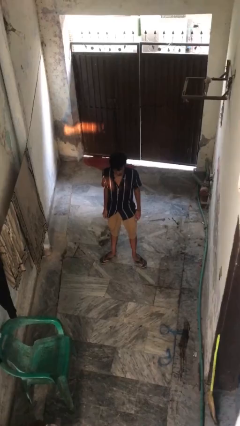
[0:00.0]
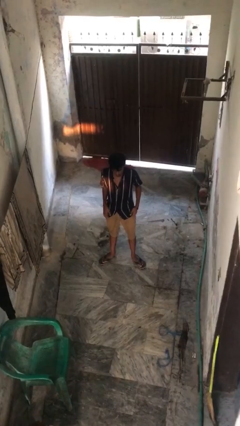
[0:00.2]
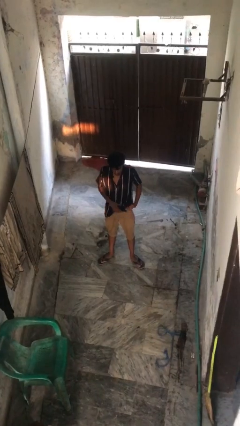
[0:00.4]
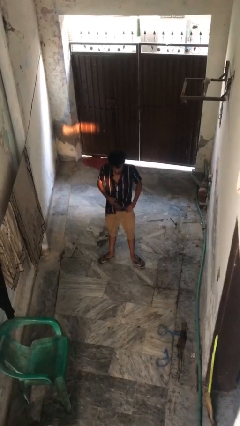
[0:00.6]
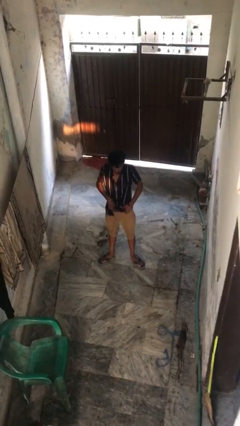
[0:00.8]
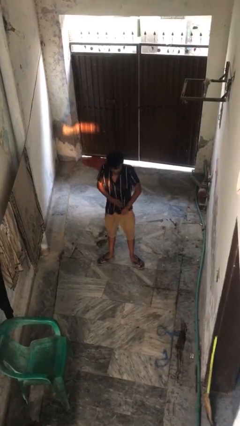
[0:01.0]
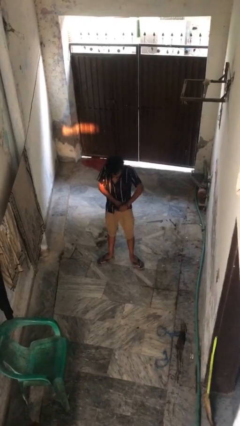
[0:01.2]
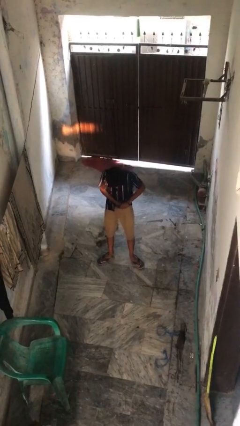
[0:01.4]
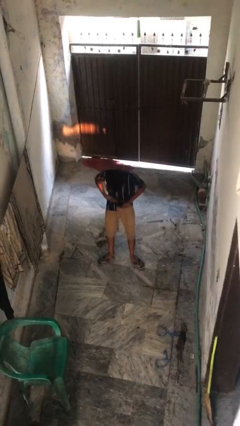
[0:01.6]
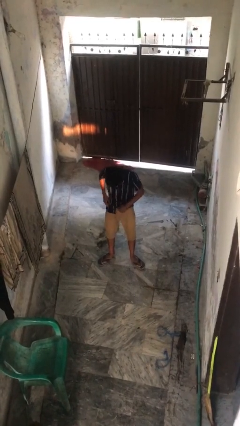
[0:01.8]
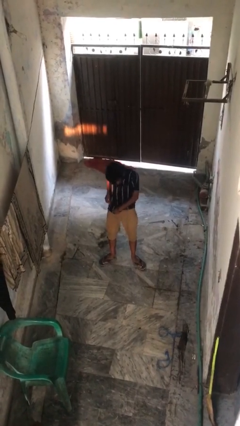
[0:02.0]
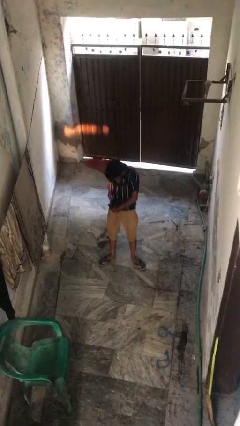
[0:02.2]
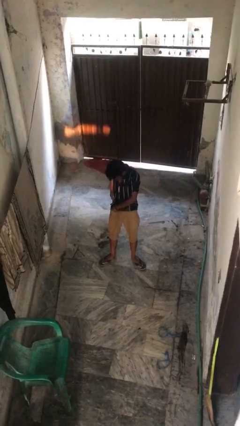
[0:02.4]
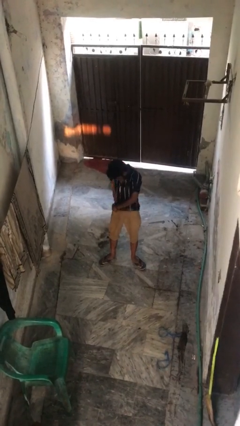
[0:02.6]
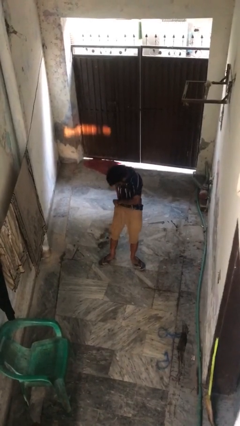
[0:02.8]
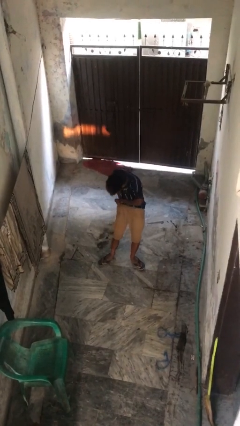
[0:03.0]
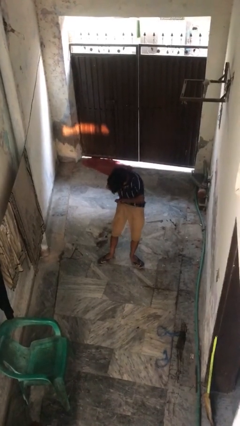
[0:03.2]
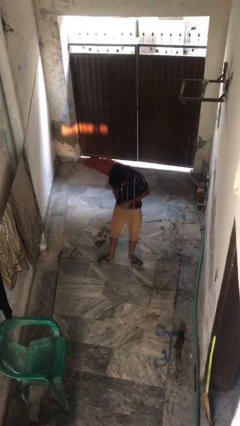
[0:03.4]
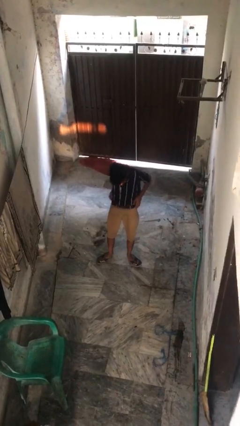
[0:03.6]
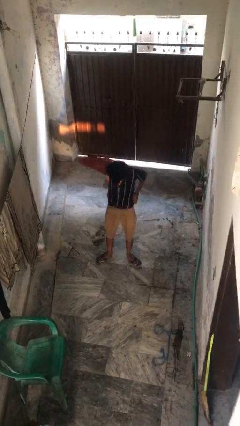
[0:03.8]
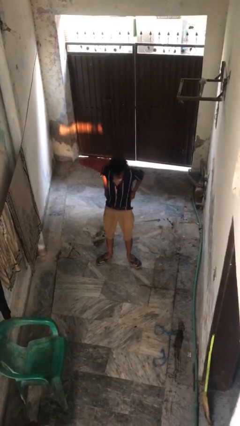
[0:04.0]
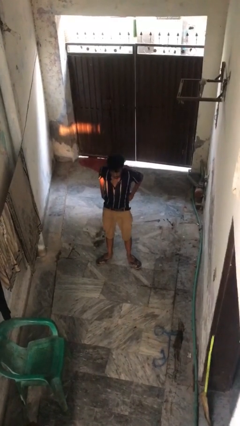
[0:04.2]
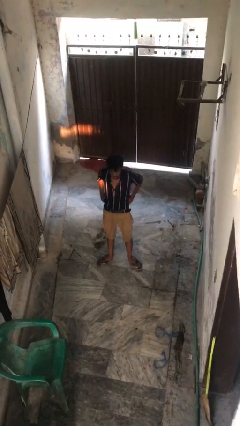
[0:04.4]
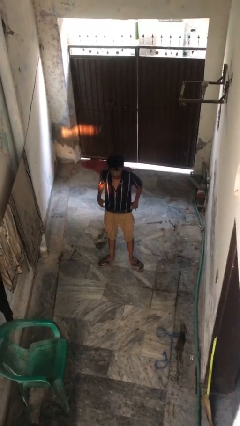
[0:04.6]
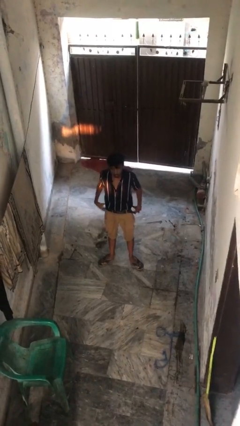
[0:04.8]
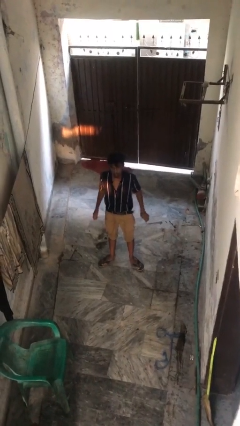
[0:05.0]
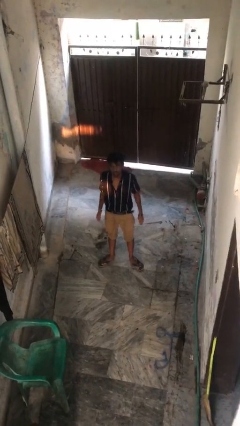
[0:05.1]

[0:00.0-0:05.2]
person tucks in shirt

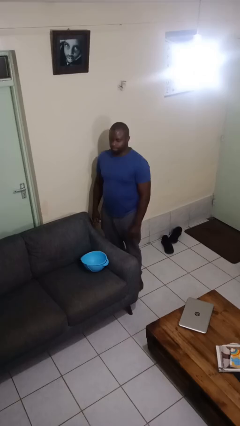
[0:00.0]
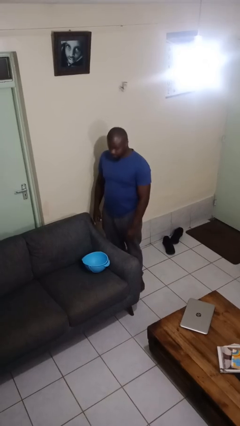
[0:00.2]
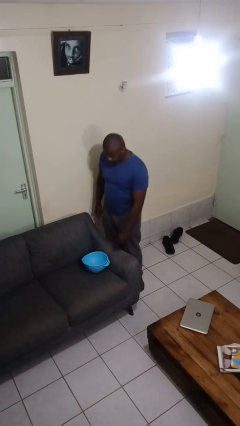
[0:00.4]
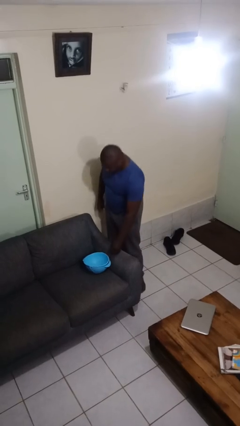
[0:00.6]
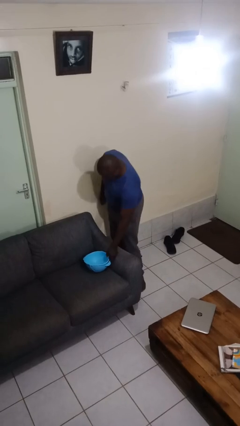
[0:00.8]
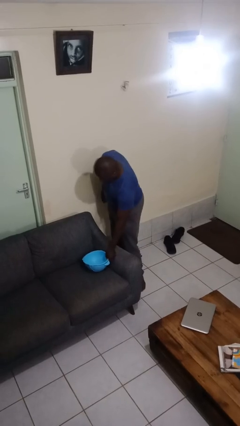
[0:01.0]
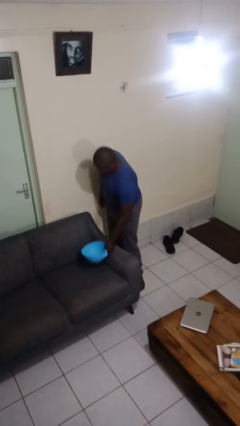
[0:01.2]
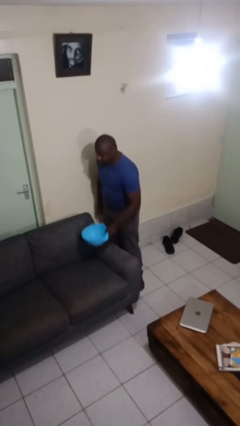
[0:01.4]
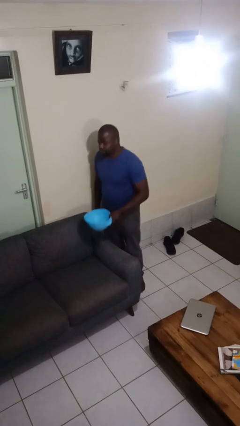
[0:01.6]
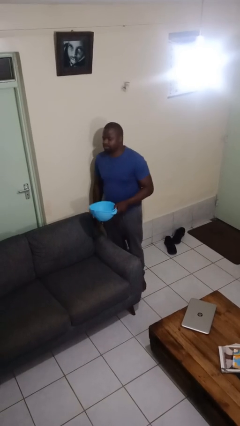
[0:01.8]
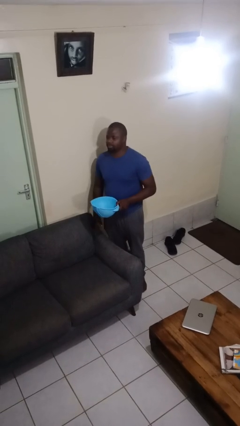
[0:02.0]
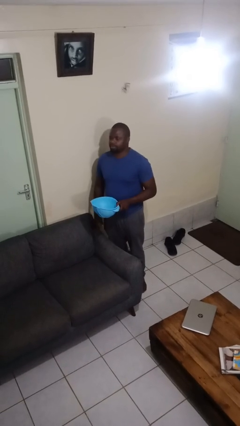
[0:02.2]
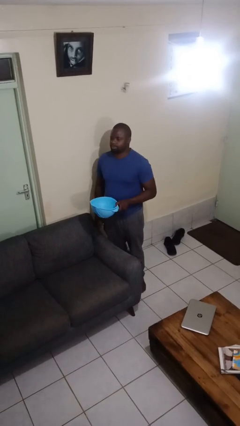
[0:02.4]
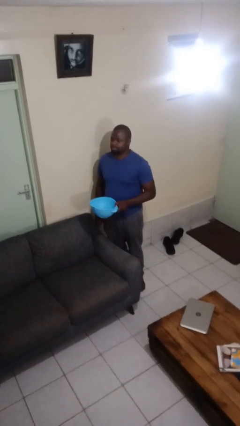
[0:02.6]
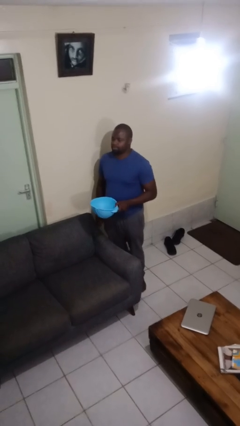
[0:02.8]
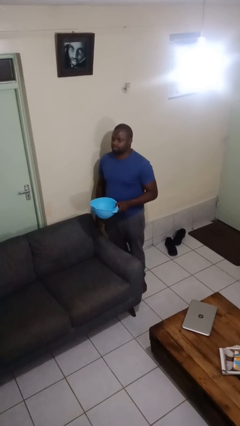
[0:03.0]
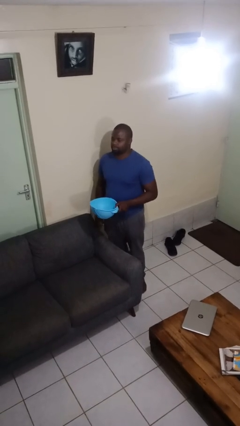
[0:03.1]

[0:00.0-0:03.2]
person picks up object from couch

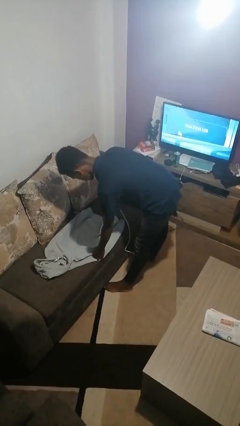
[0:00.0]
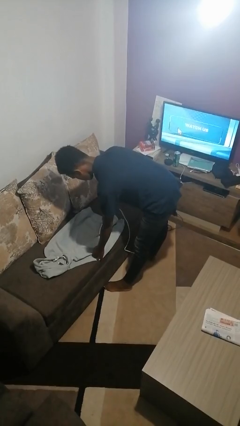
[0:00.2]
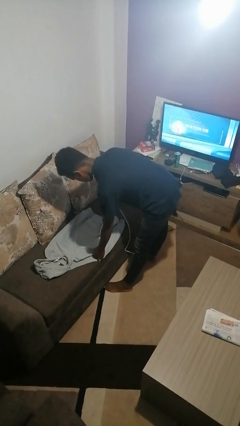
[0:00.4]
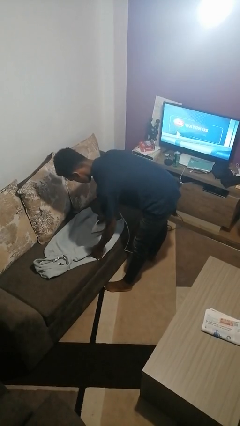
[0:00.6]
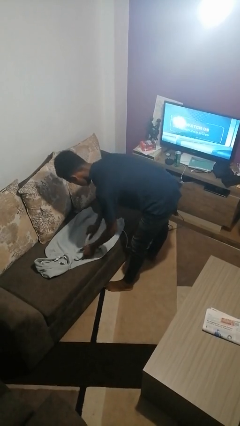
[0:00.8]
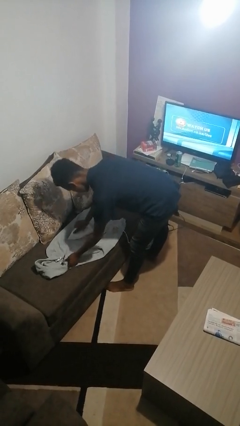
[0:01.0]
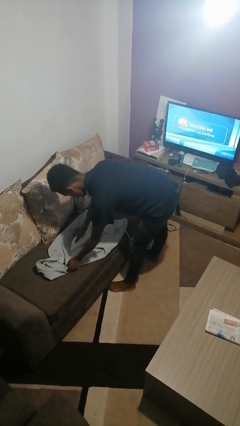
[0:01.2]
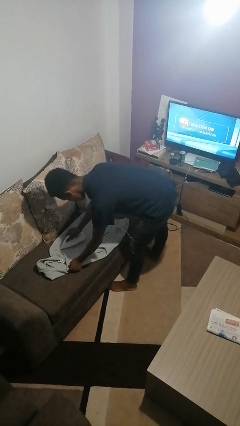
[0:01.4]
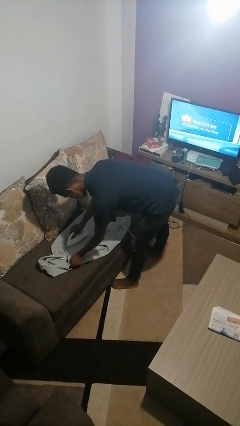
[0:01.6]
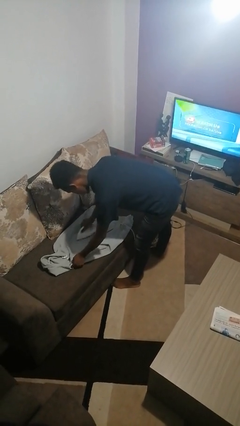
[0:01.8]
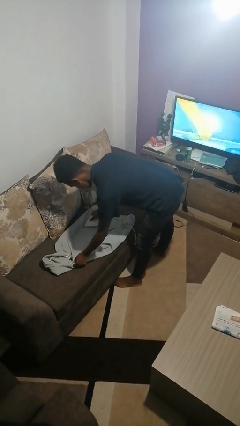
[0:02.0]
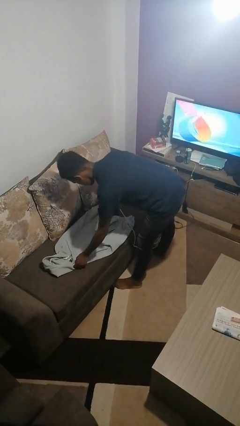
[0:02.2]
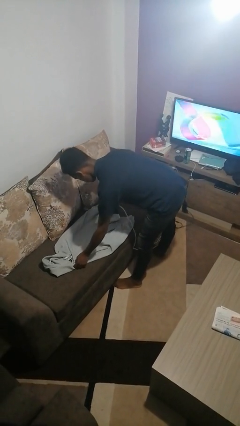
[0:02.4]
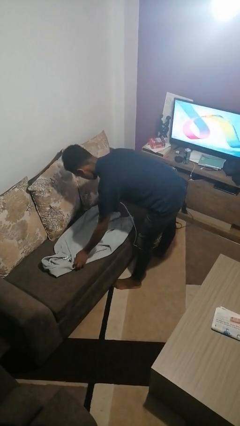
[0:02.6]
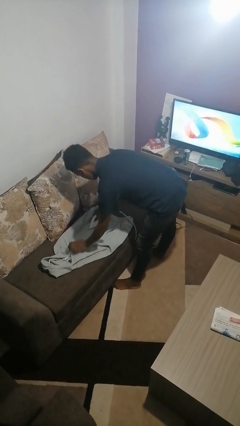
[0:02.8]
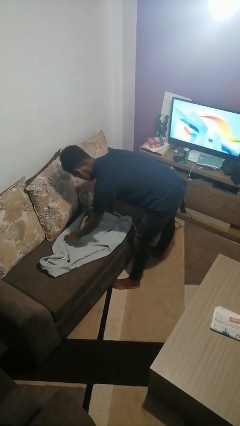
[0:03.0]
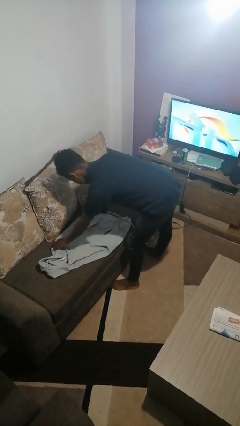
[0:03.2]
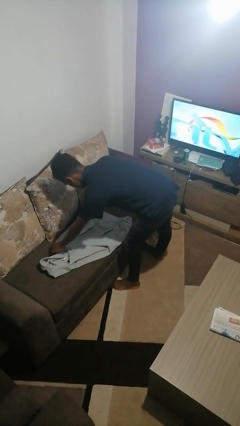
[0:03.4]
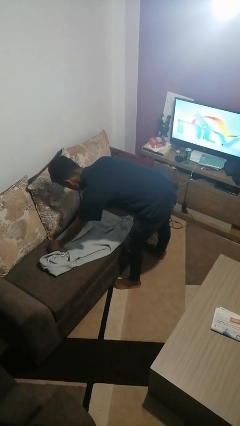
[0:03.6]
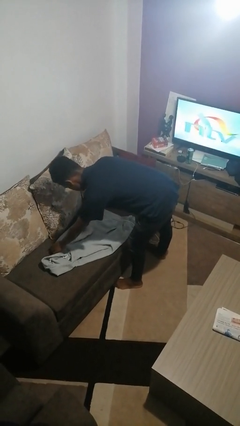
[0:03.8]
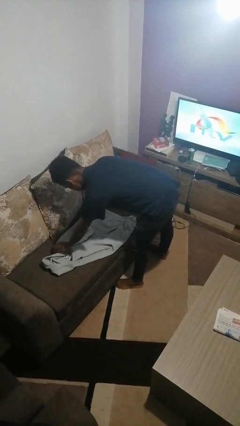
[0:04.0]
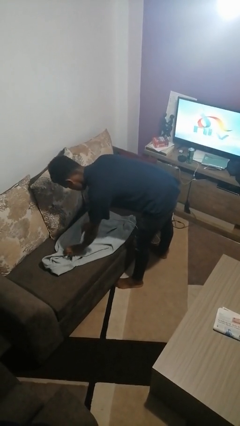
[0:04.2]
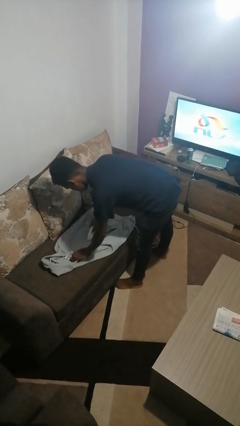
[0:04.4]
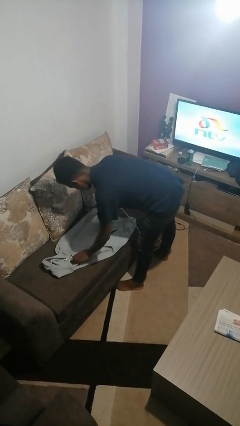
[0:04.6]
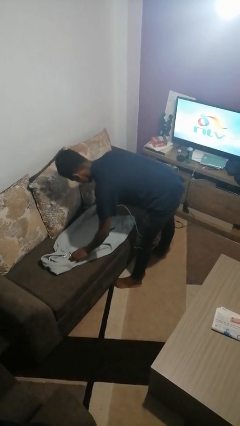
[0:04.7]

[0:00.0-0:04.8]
person irons clothes

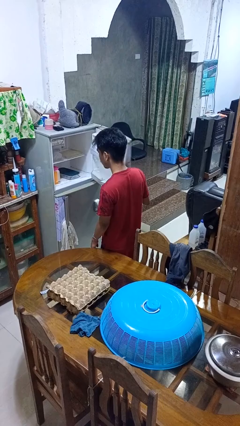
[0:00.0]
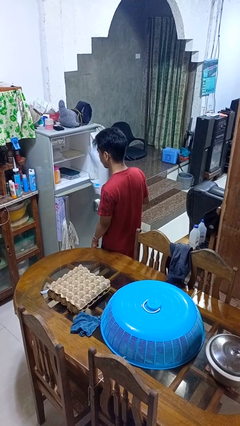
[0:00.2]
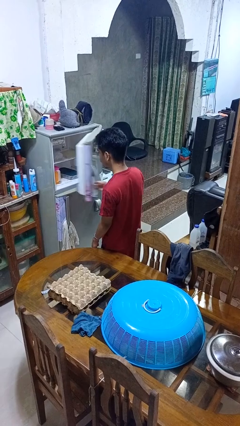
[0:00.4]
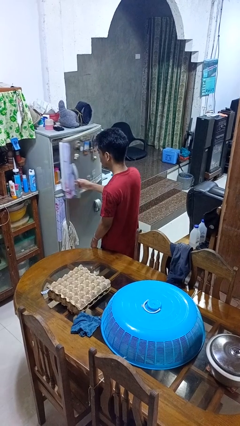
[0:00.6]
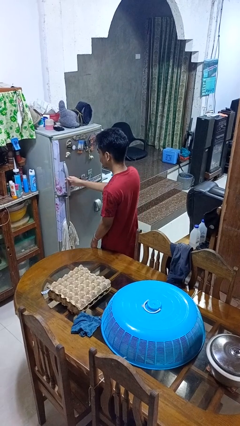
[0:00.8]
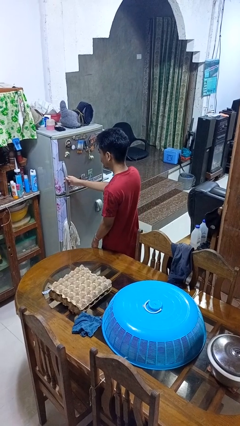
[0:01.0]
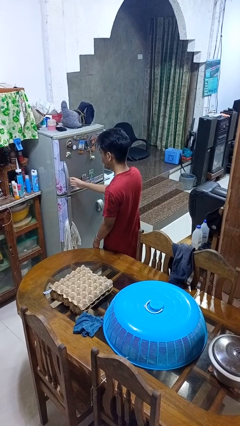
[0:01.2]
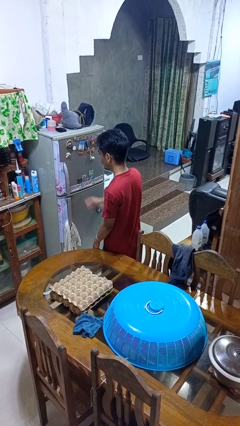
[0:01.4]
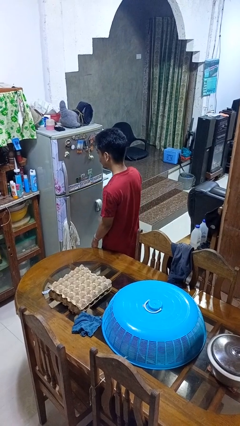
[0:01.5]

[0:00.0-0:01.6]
person closes refrigerator

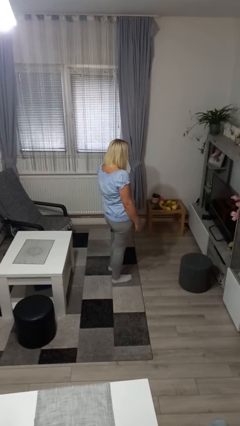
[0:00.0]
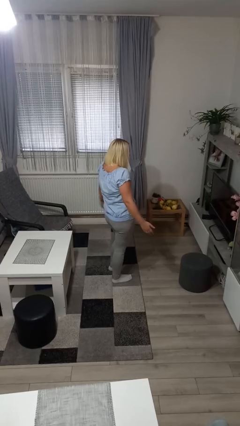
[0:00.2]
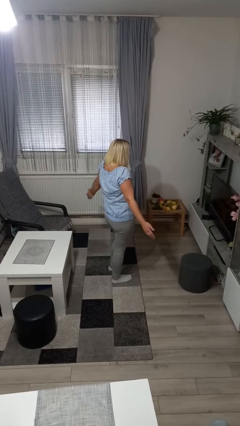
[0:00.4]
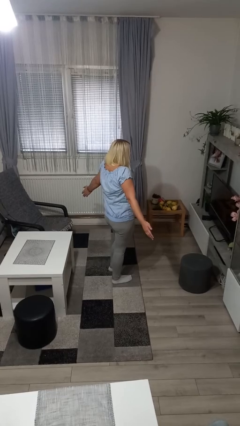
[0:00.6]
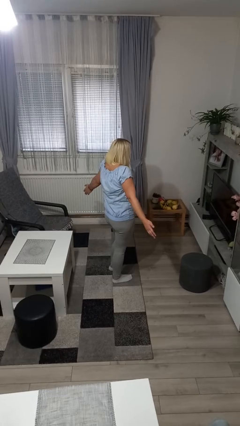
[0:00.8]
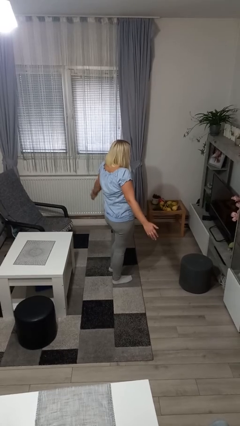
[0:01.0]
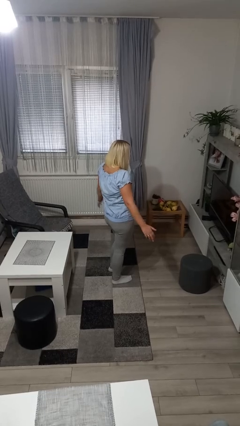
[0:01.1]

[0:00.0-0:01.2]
person shrugs

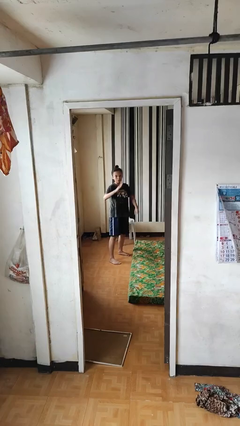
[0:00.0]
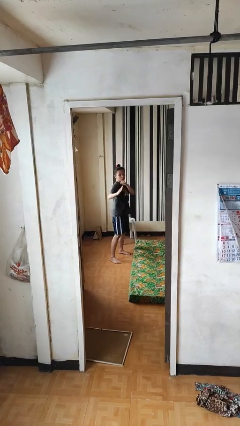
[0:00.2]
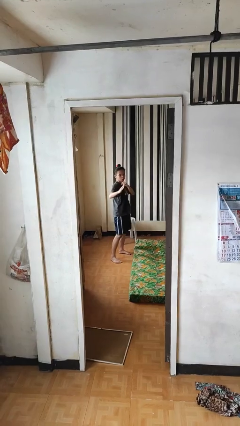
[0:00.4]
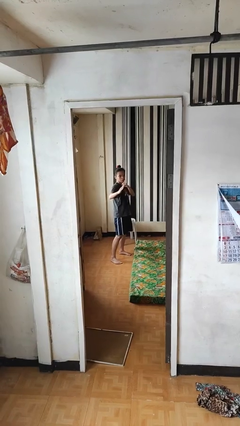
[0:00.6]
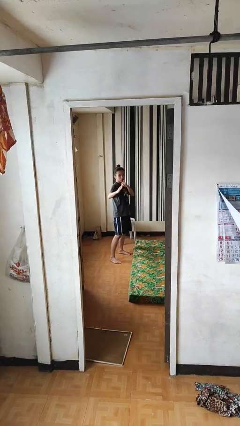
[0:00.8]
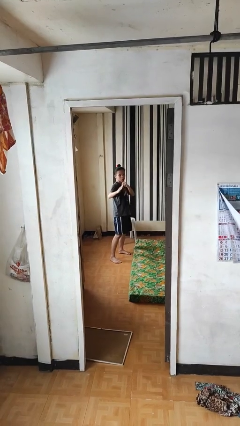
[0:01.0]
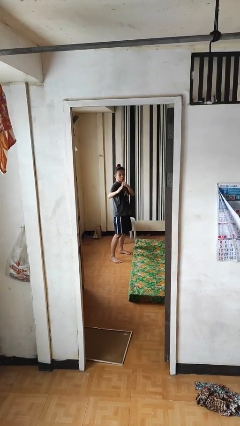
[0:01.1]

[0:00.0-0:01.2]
person karate chop
